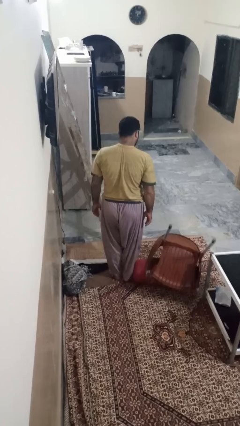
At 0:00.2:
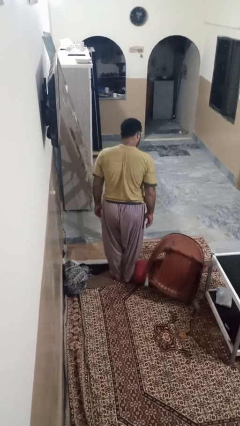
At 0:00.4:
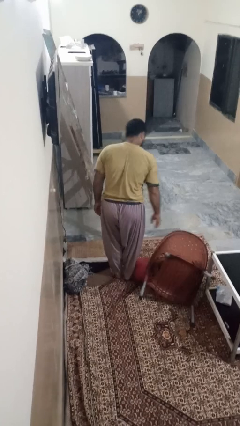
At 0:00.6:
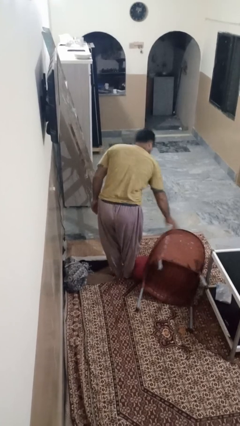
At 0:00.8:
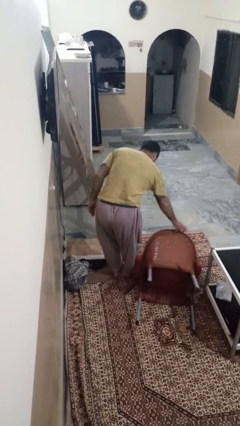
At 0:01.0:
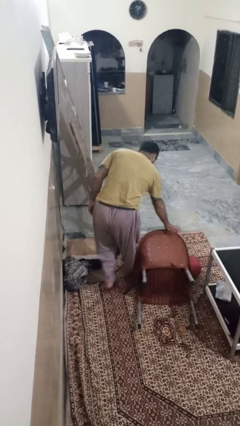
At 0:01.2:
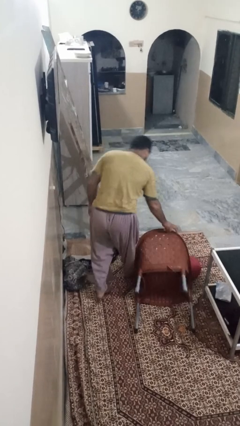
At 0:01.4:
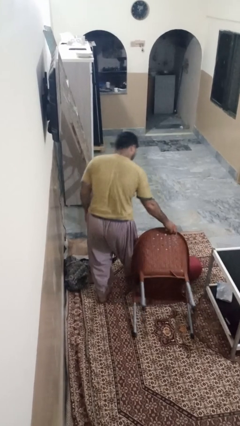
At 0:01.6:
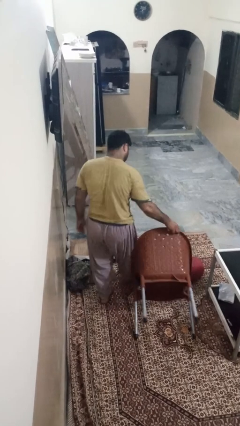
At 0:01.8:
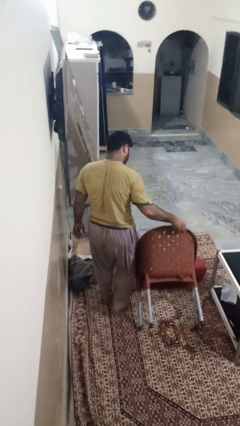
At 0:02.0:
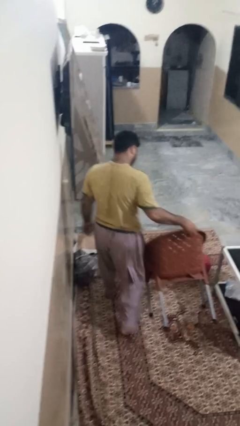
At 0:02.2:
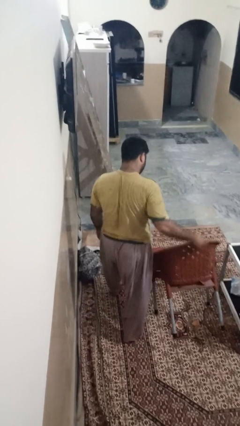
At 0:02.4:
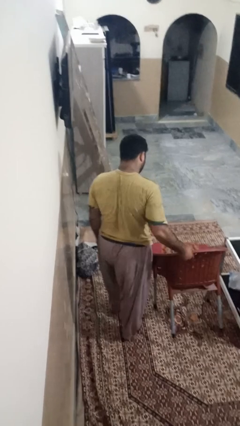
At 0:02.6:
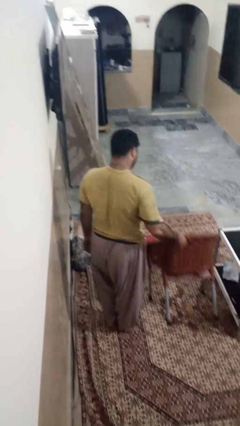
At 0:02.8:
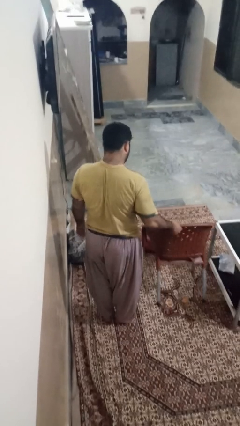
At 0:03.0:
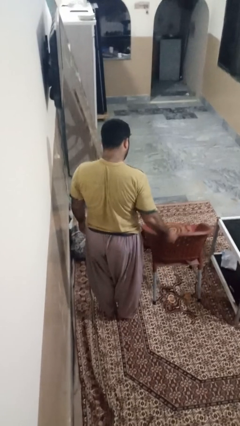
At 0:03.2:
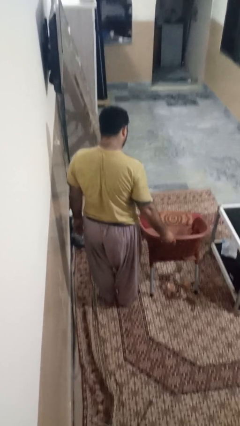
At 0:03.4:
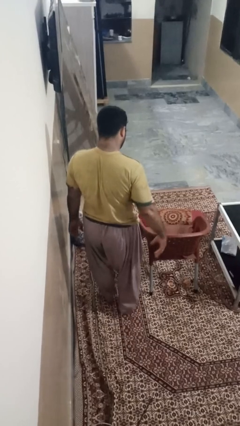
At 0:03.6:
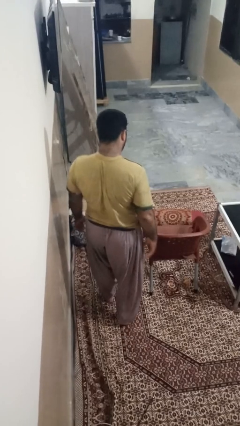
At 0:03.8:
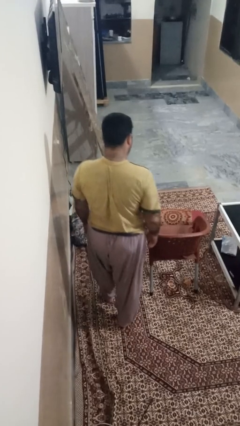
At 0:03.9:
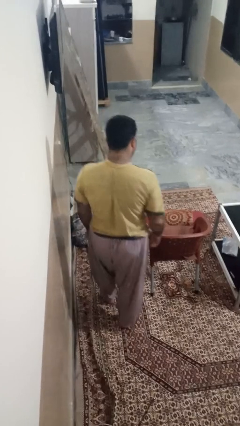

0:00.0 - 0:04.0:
person sets upright furniture

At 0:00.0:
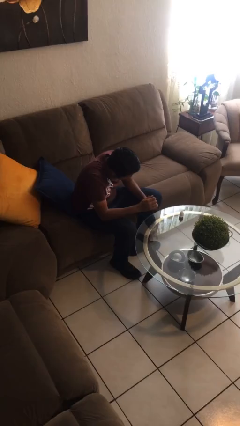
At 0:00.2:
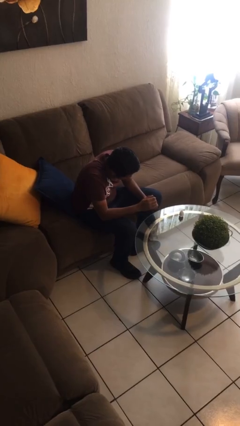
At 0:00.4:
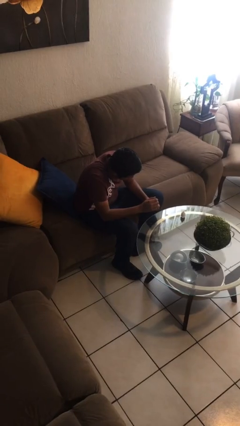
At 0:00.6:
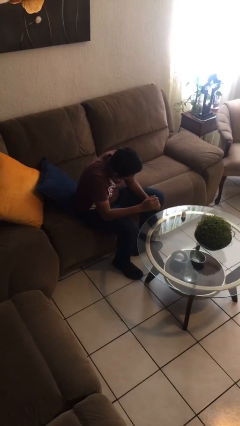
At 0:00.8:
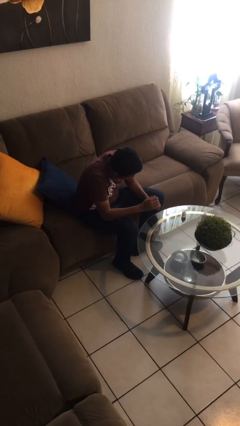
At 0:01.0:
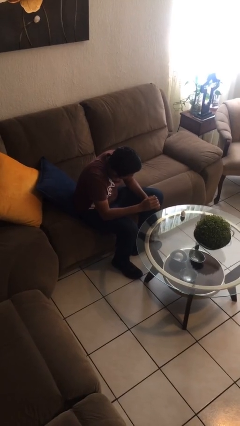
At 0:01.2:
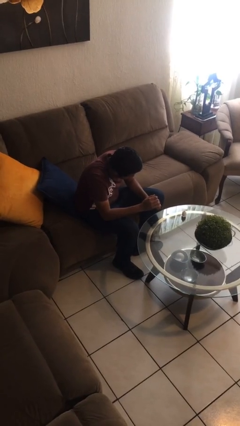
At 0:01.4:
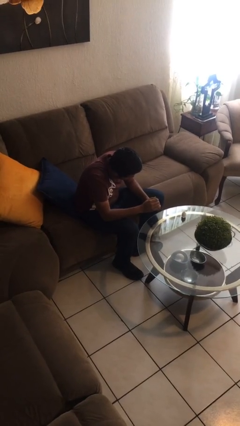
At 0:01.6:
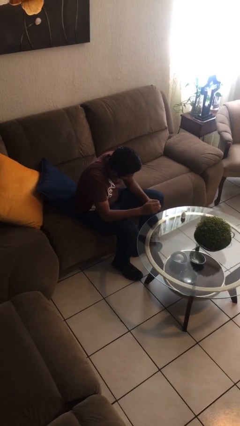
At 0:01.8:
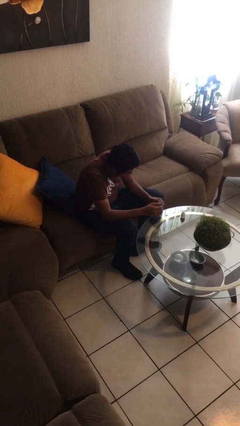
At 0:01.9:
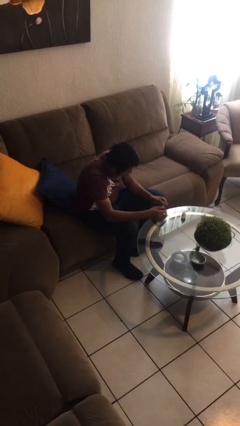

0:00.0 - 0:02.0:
person paints fingernails

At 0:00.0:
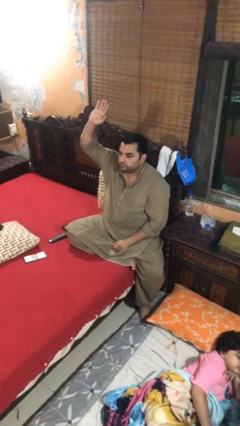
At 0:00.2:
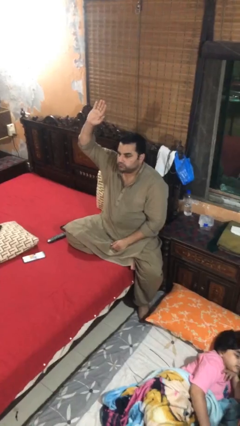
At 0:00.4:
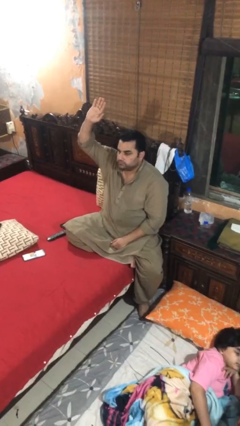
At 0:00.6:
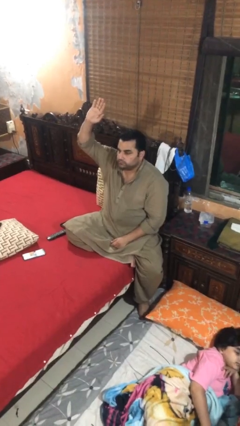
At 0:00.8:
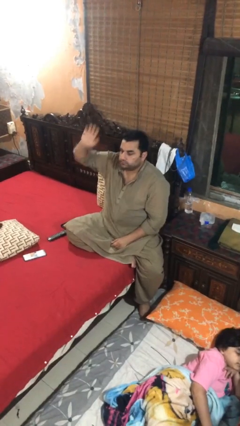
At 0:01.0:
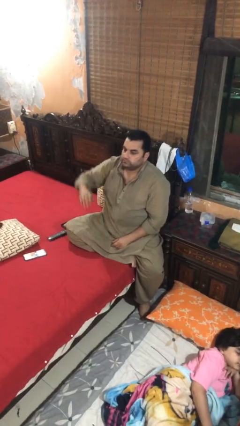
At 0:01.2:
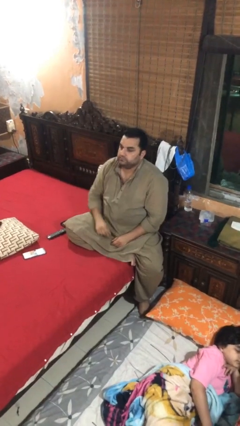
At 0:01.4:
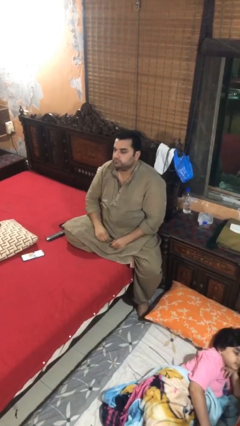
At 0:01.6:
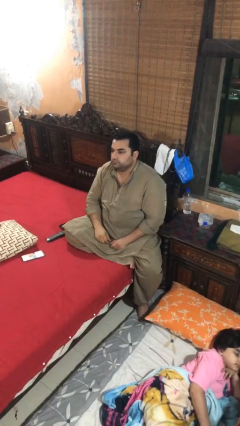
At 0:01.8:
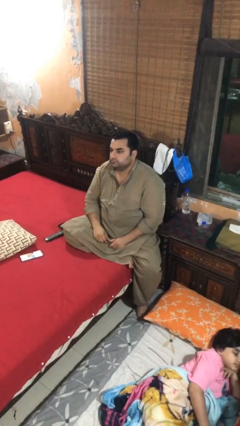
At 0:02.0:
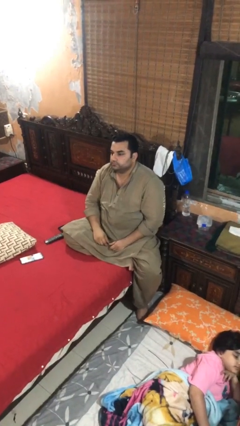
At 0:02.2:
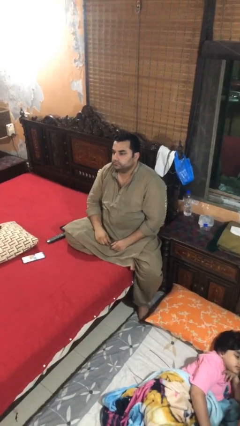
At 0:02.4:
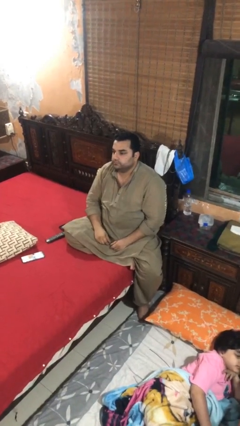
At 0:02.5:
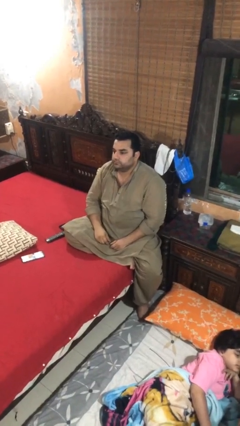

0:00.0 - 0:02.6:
person gestures lower hand

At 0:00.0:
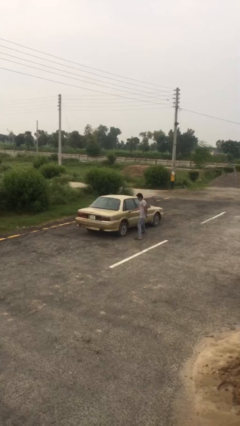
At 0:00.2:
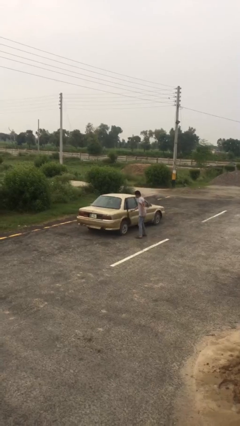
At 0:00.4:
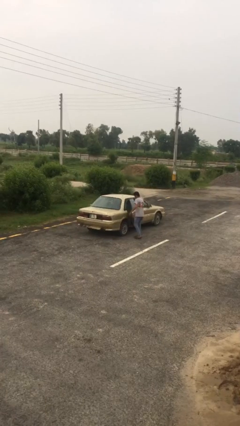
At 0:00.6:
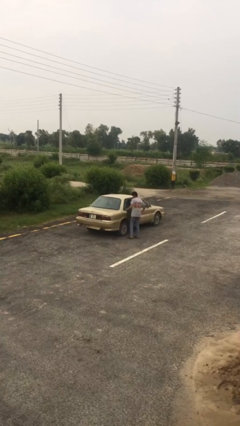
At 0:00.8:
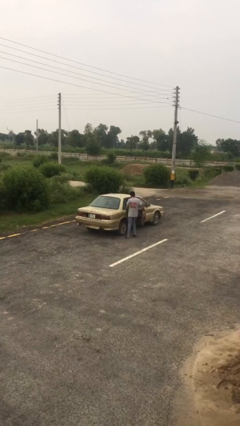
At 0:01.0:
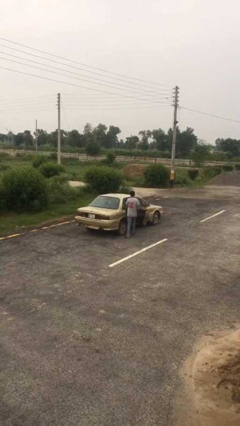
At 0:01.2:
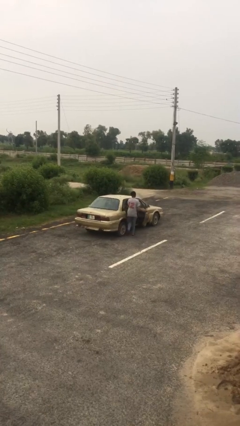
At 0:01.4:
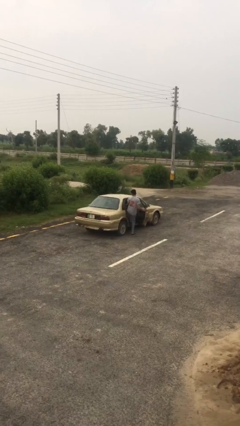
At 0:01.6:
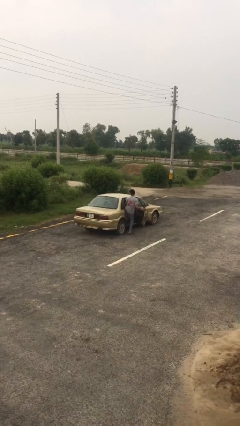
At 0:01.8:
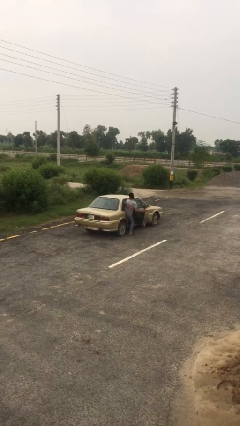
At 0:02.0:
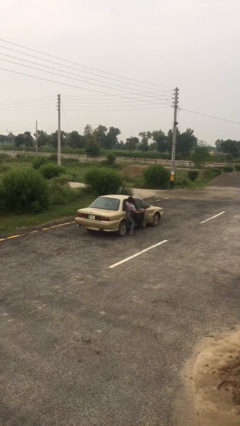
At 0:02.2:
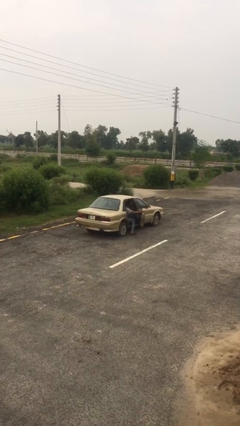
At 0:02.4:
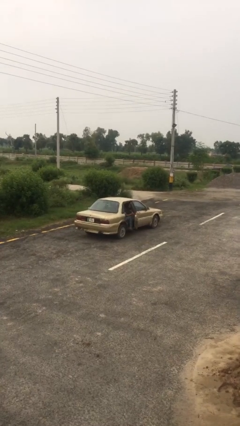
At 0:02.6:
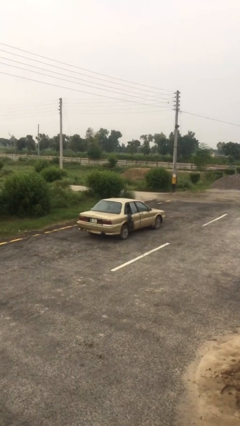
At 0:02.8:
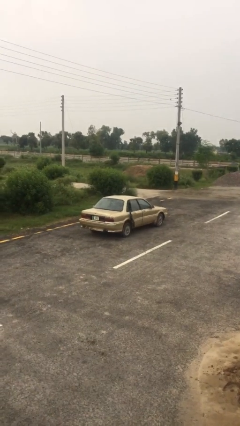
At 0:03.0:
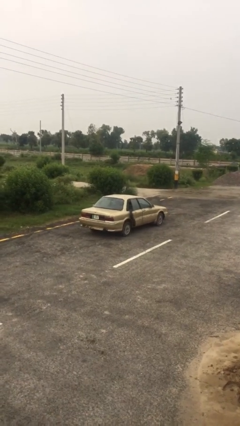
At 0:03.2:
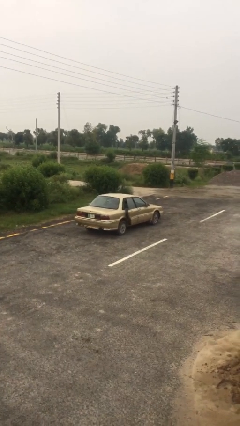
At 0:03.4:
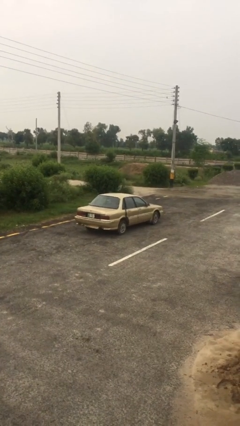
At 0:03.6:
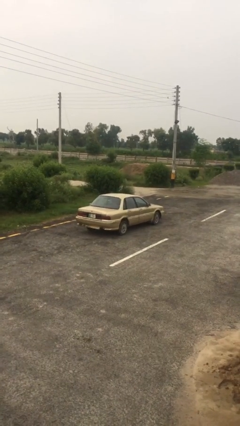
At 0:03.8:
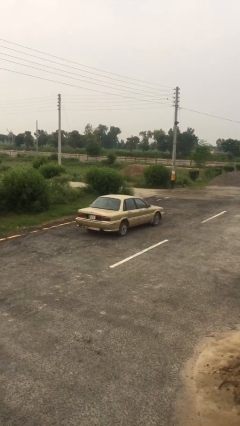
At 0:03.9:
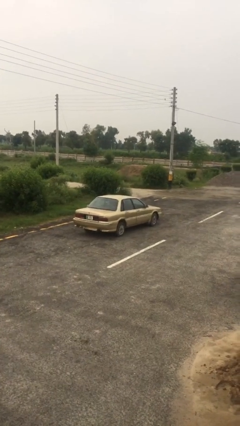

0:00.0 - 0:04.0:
car picks up person

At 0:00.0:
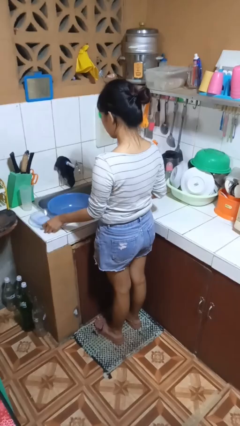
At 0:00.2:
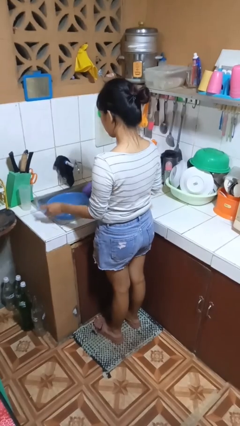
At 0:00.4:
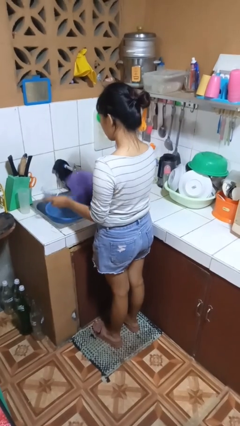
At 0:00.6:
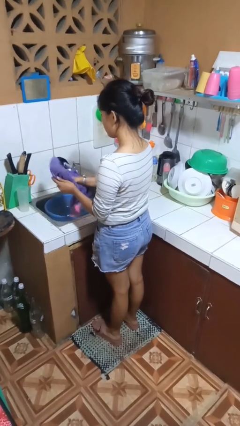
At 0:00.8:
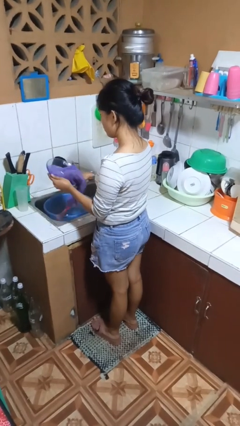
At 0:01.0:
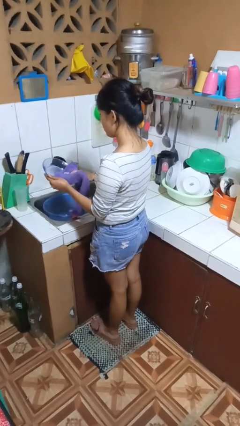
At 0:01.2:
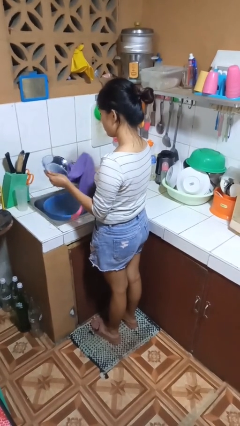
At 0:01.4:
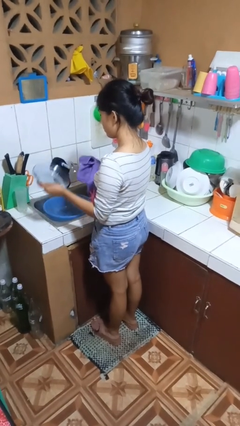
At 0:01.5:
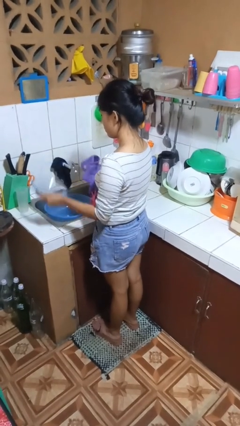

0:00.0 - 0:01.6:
person dries dish

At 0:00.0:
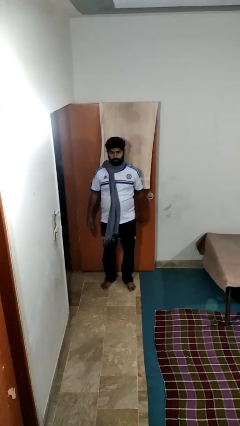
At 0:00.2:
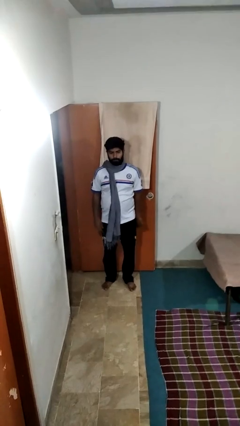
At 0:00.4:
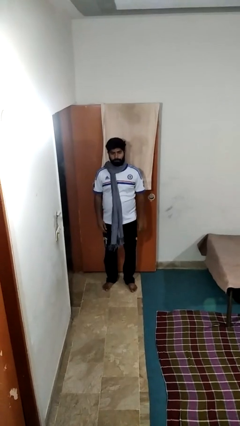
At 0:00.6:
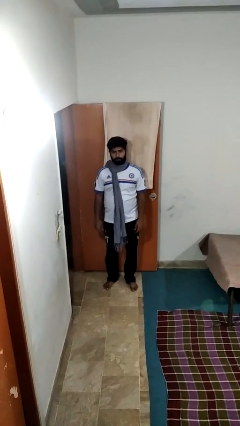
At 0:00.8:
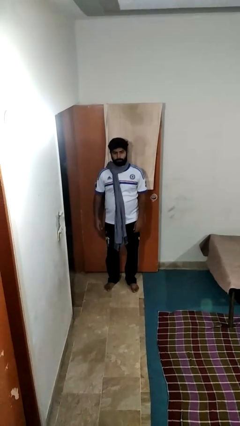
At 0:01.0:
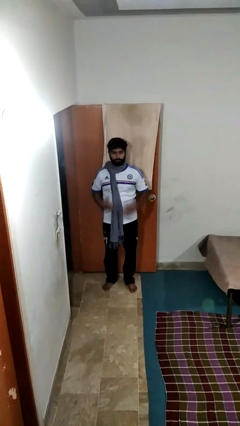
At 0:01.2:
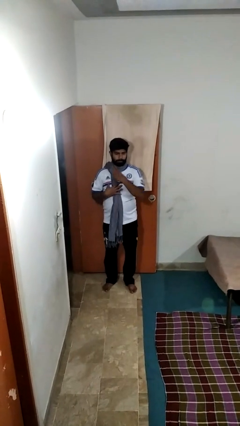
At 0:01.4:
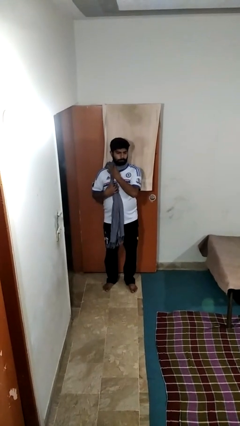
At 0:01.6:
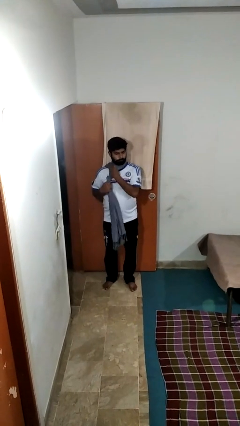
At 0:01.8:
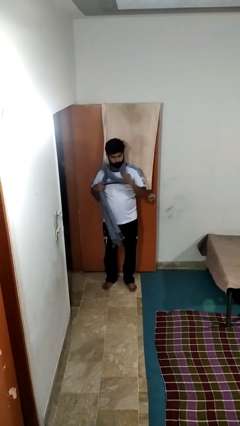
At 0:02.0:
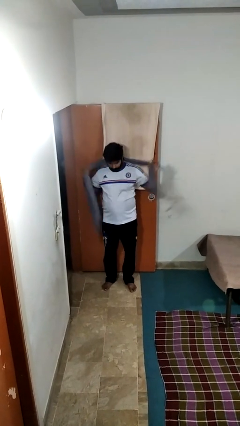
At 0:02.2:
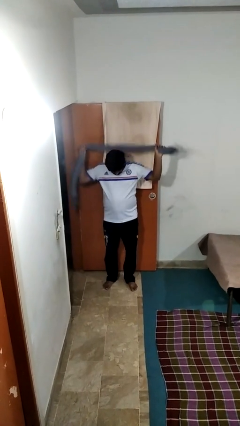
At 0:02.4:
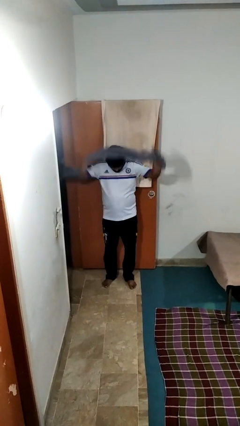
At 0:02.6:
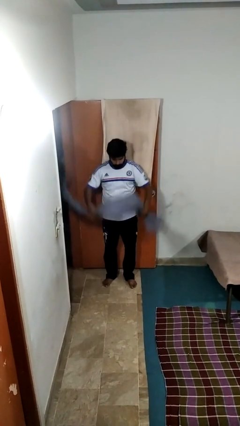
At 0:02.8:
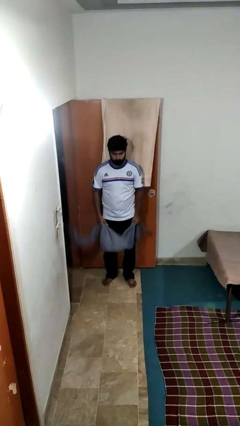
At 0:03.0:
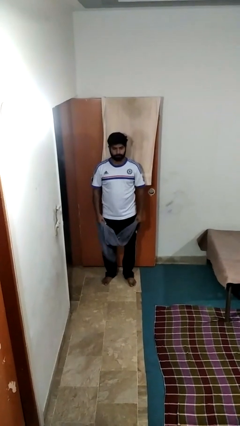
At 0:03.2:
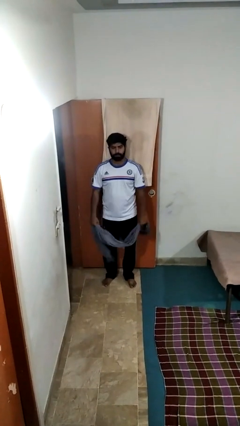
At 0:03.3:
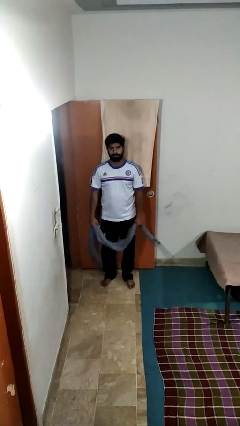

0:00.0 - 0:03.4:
person takes off scarf
